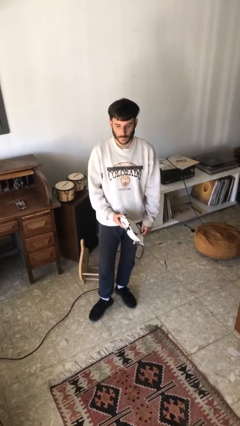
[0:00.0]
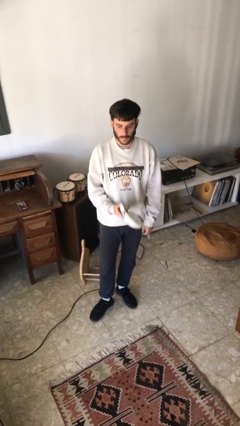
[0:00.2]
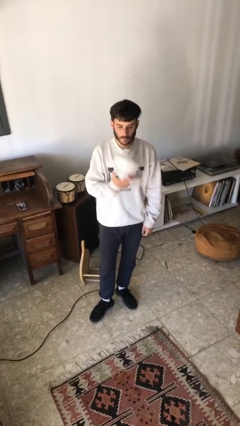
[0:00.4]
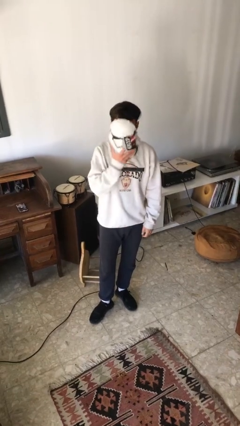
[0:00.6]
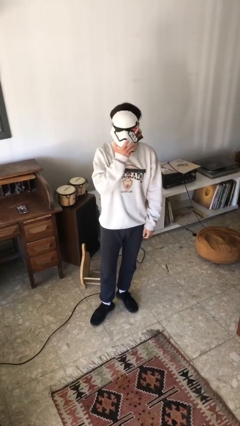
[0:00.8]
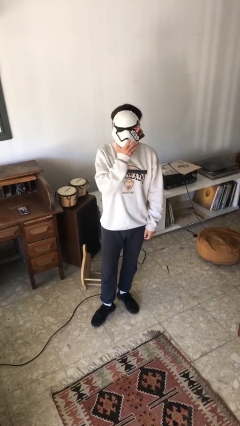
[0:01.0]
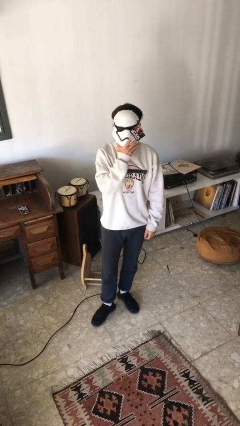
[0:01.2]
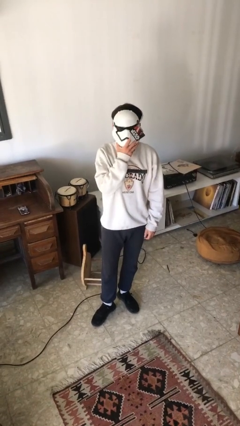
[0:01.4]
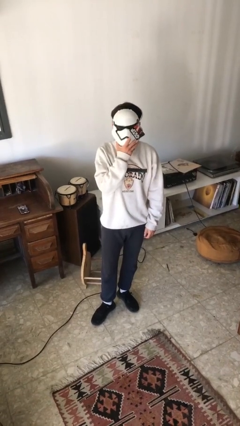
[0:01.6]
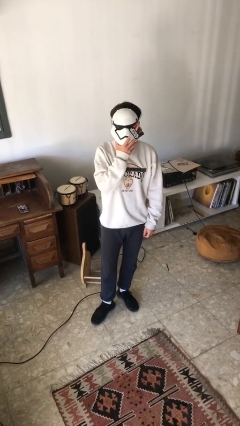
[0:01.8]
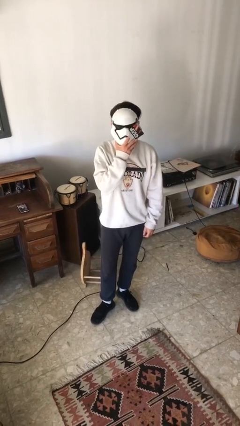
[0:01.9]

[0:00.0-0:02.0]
person puts on facemask

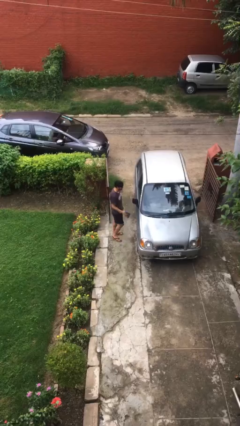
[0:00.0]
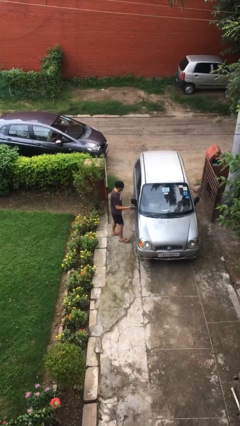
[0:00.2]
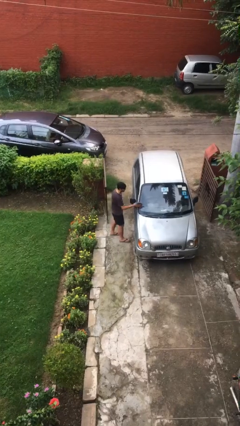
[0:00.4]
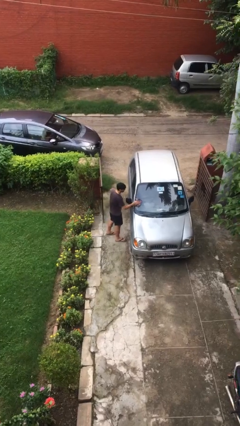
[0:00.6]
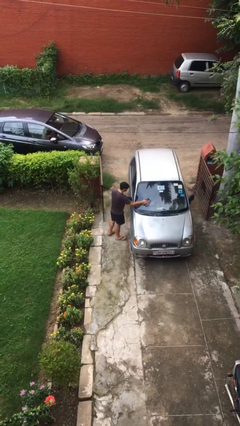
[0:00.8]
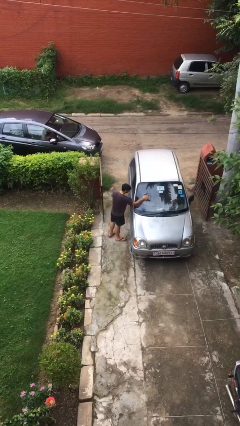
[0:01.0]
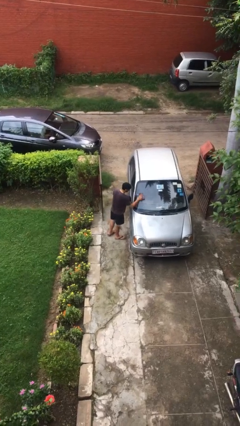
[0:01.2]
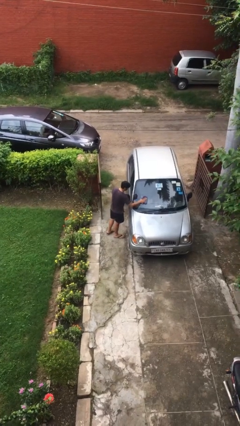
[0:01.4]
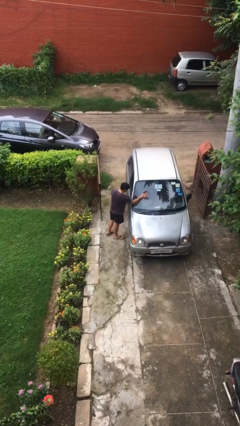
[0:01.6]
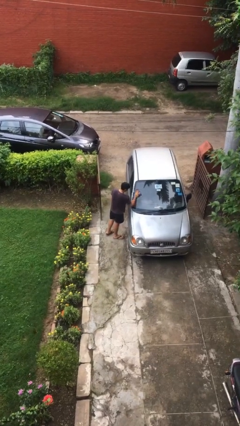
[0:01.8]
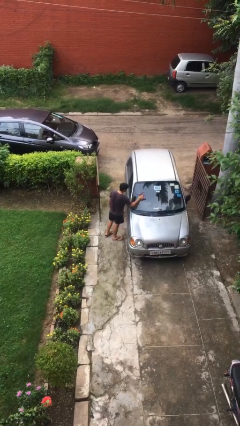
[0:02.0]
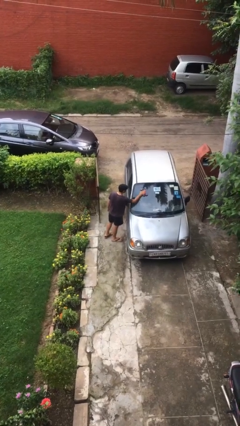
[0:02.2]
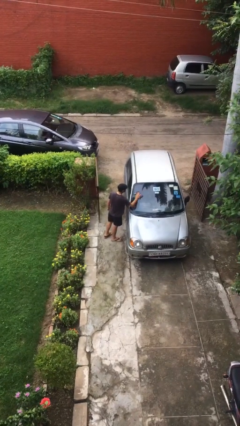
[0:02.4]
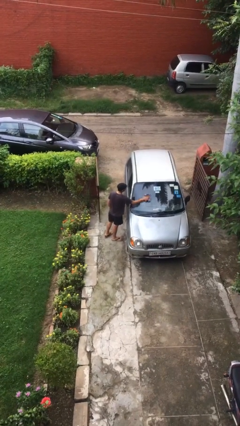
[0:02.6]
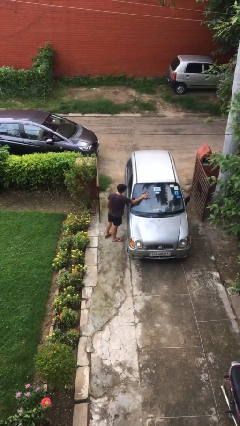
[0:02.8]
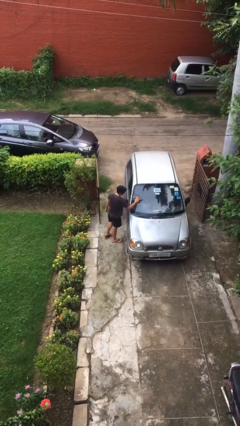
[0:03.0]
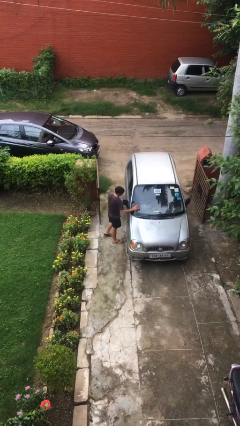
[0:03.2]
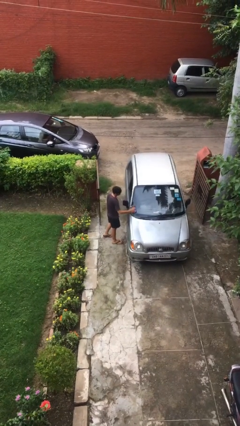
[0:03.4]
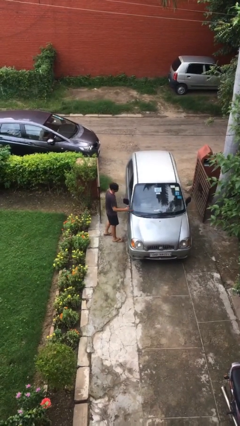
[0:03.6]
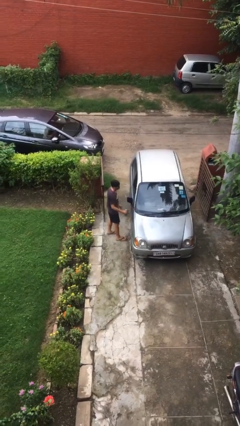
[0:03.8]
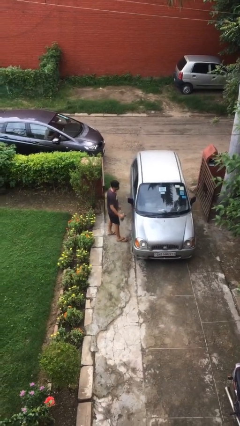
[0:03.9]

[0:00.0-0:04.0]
person polishes car with rag

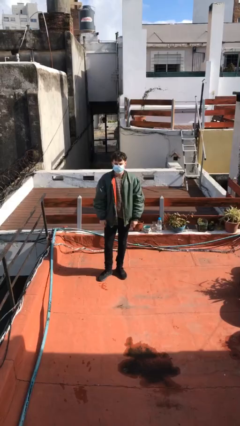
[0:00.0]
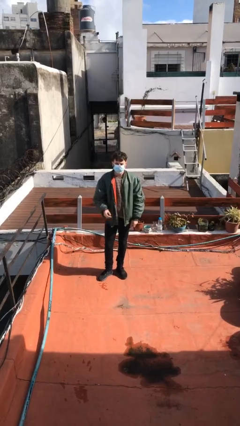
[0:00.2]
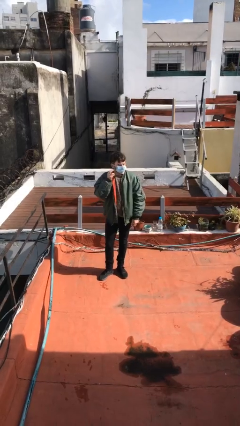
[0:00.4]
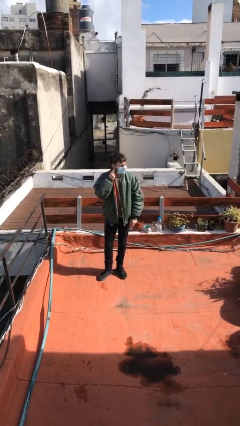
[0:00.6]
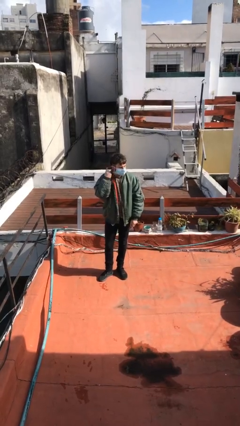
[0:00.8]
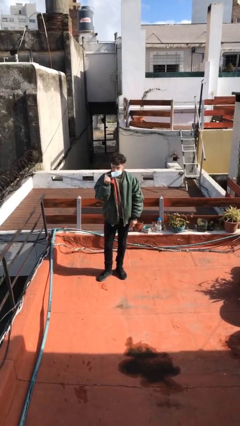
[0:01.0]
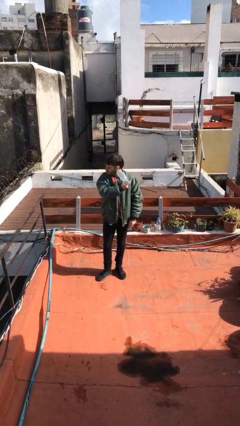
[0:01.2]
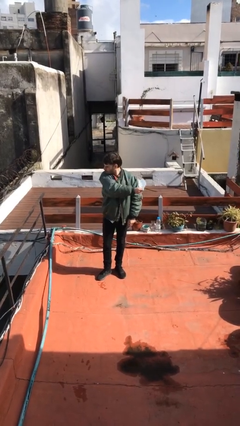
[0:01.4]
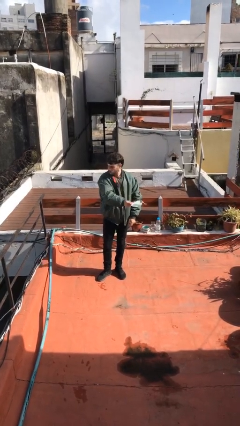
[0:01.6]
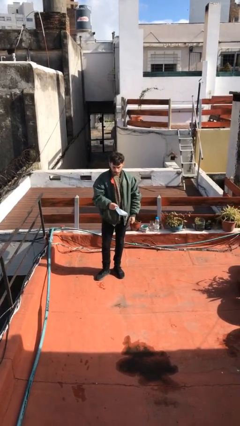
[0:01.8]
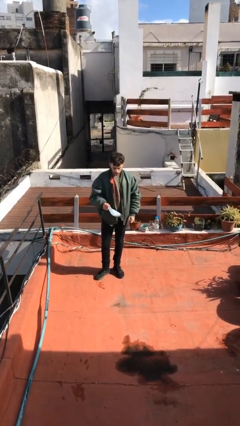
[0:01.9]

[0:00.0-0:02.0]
person takes off facemask

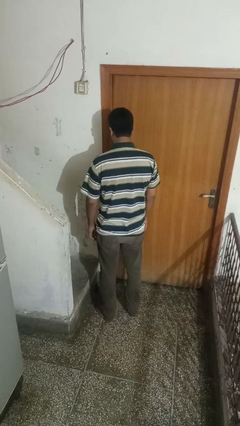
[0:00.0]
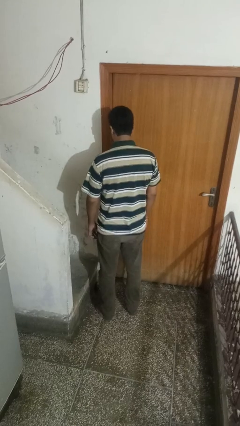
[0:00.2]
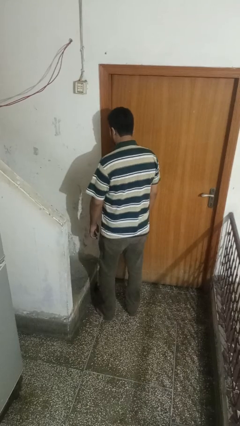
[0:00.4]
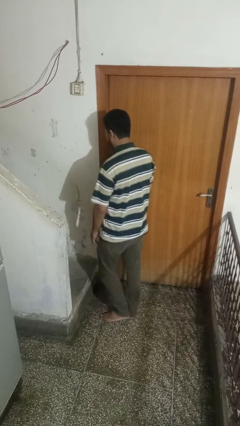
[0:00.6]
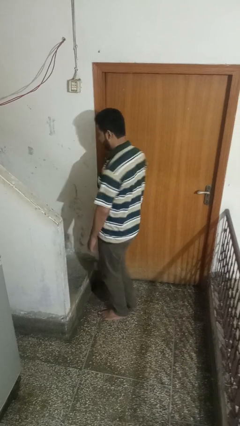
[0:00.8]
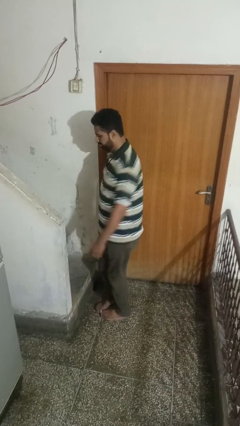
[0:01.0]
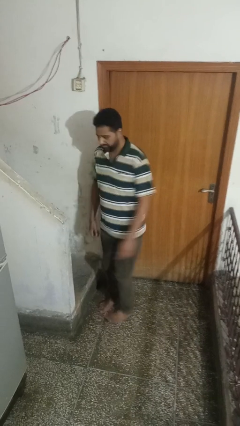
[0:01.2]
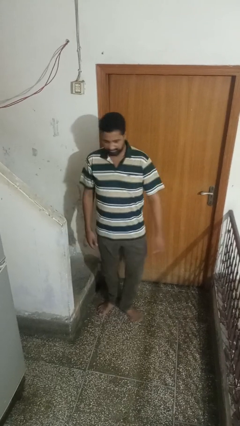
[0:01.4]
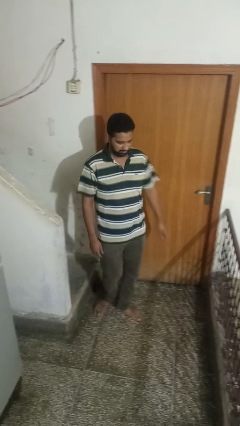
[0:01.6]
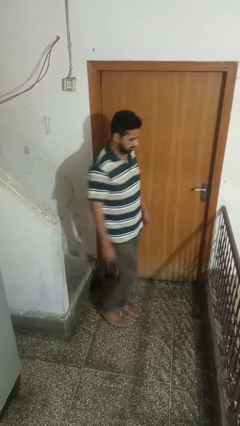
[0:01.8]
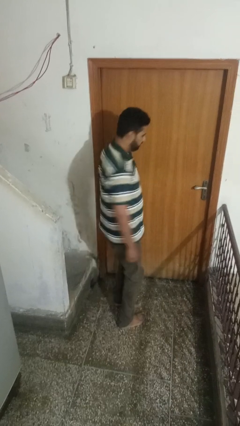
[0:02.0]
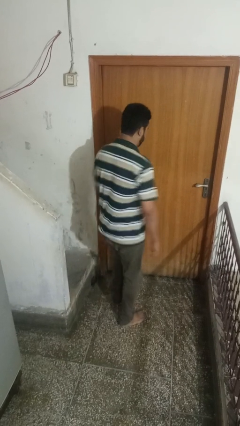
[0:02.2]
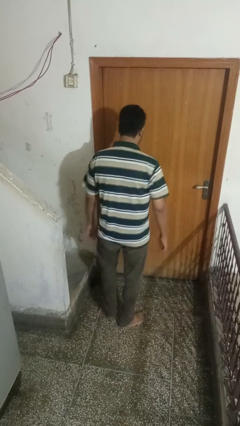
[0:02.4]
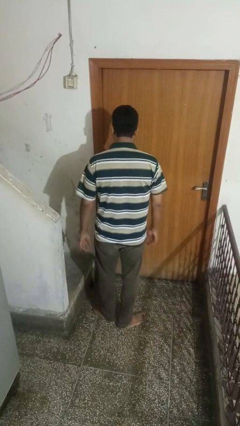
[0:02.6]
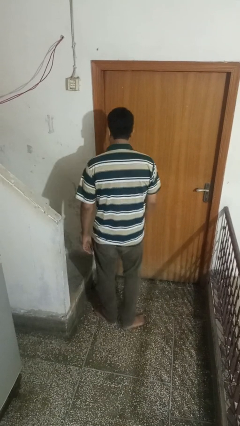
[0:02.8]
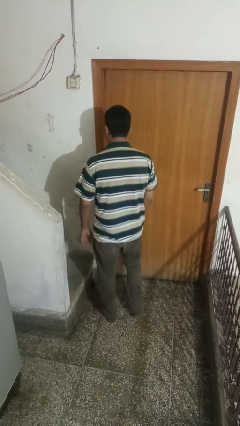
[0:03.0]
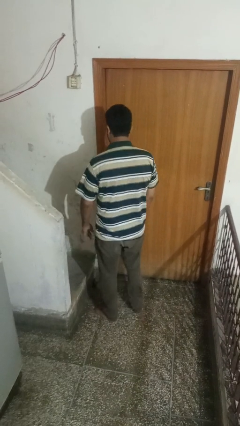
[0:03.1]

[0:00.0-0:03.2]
person twirls

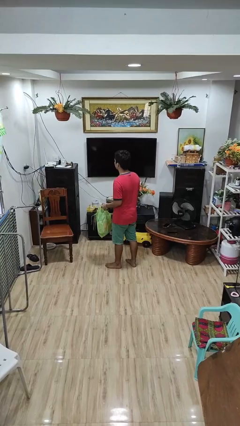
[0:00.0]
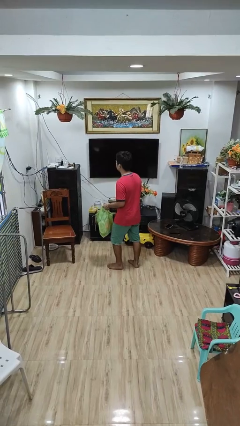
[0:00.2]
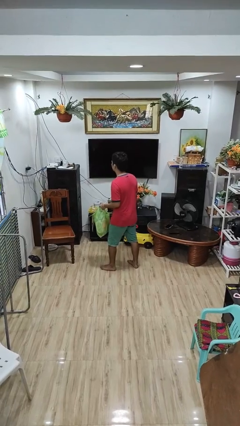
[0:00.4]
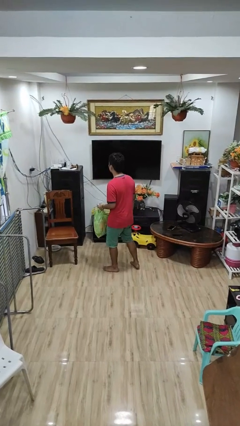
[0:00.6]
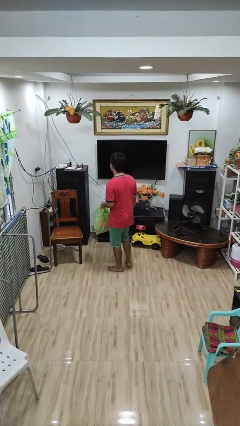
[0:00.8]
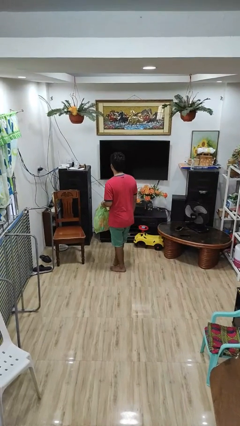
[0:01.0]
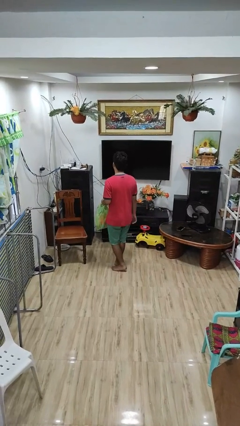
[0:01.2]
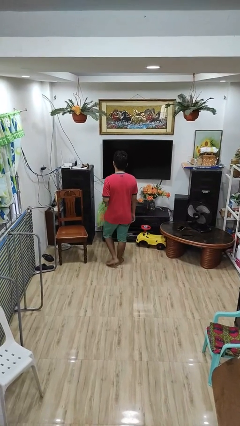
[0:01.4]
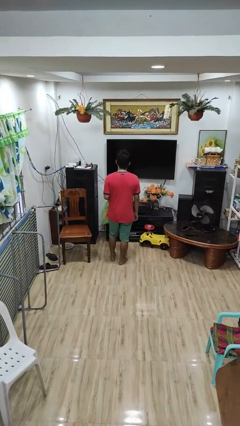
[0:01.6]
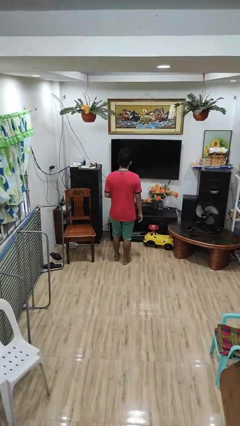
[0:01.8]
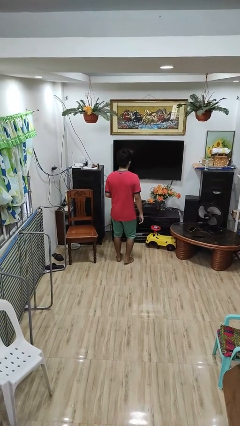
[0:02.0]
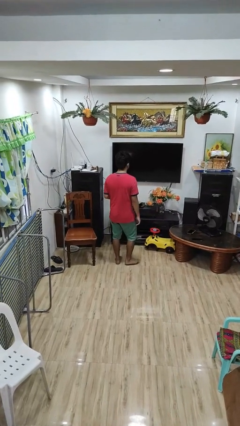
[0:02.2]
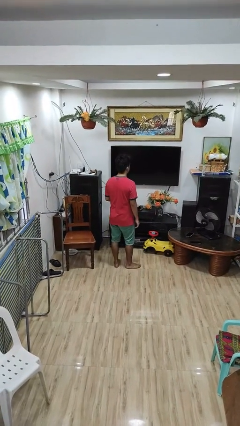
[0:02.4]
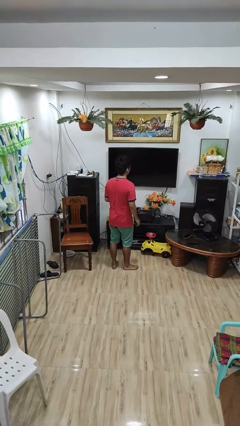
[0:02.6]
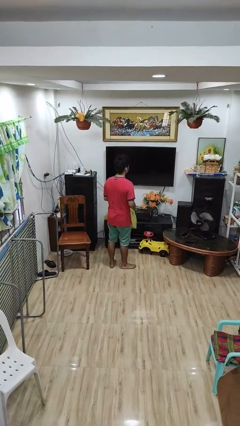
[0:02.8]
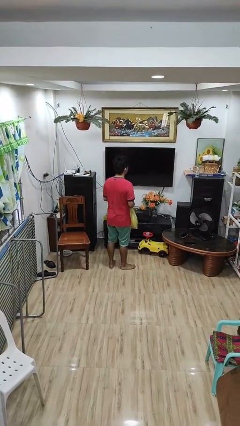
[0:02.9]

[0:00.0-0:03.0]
person carries groceries

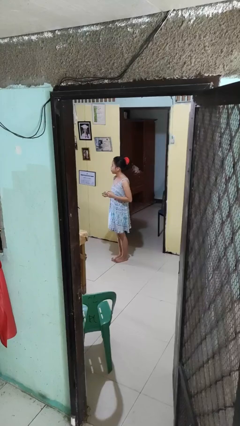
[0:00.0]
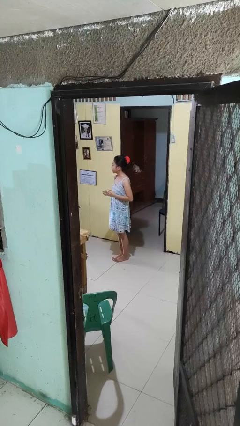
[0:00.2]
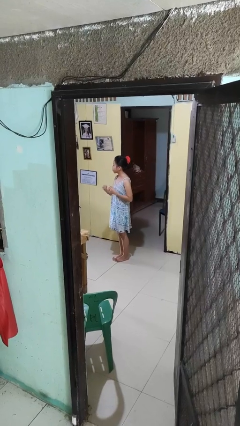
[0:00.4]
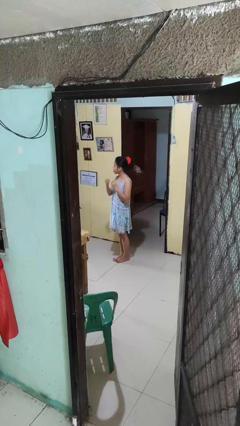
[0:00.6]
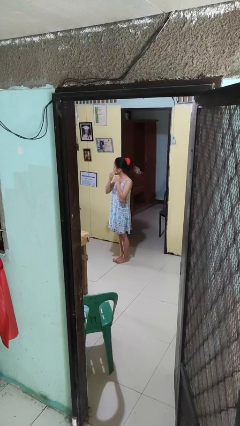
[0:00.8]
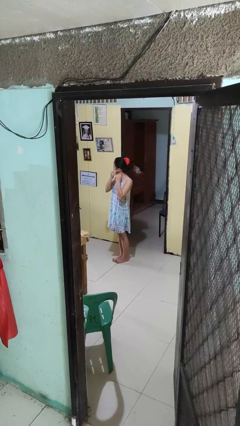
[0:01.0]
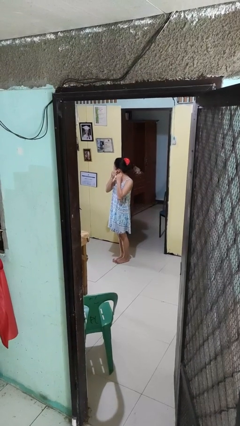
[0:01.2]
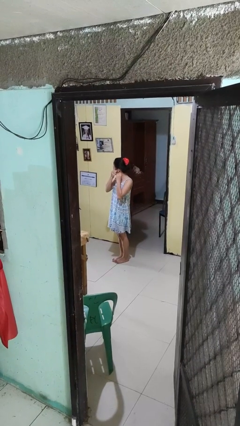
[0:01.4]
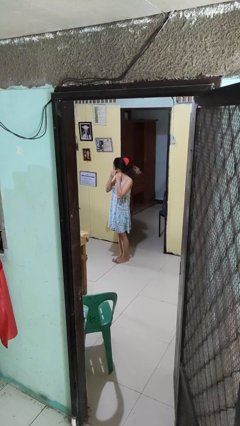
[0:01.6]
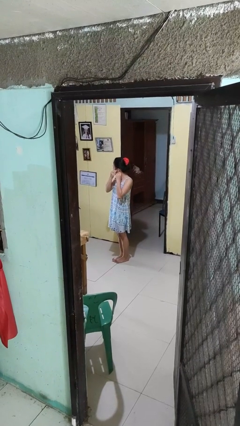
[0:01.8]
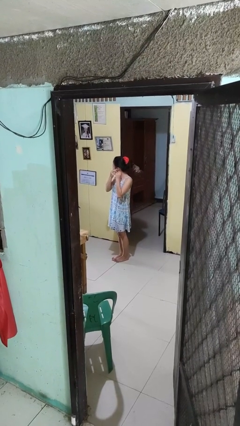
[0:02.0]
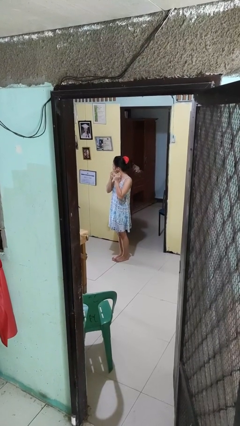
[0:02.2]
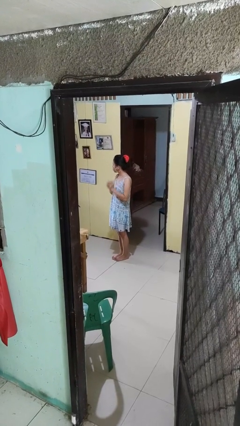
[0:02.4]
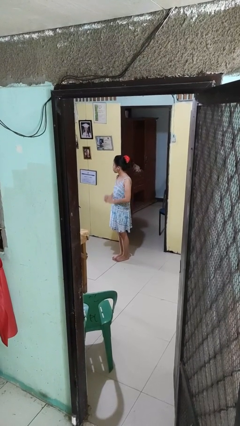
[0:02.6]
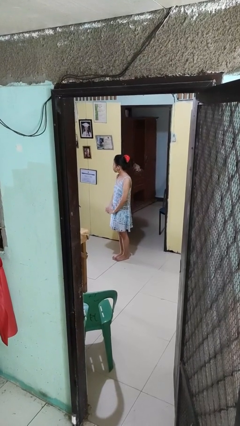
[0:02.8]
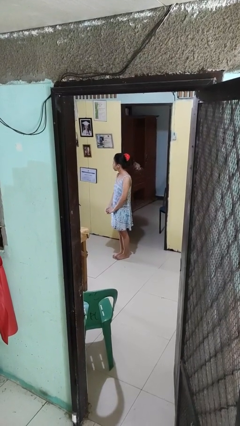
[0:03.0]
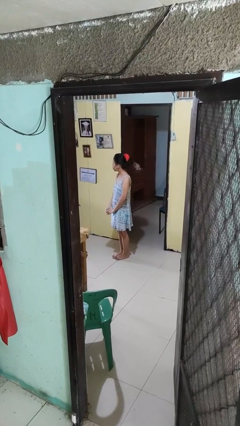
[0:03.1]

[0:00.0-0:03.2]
person puts on earrings

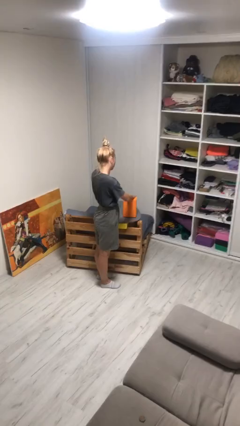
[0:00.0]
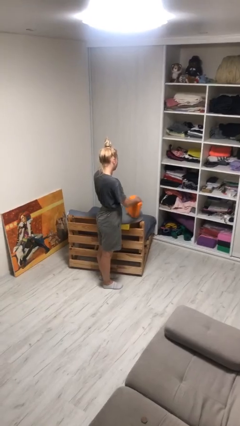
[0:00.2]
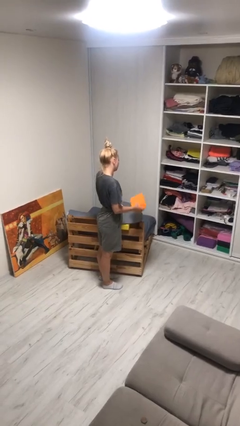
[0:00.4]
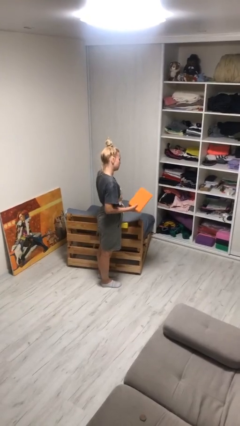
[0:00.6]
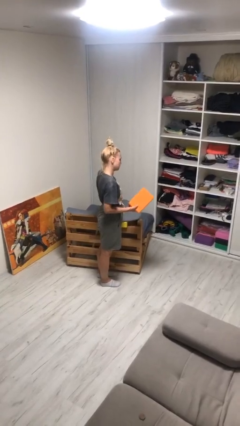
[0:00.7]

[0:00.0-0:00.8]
person picks up object from table
